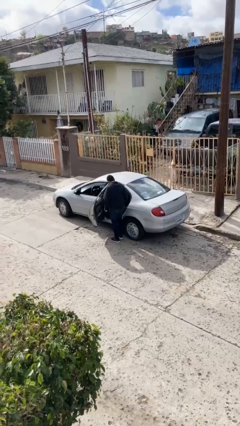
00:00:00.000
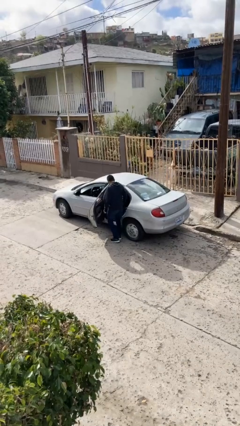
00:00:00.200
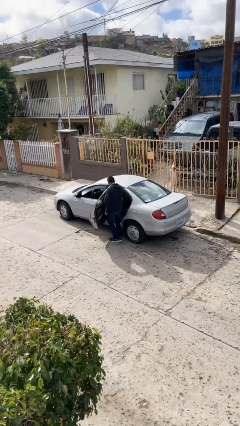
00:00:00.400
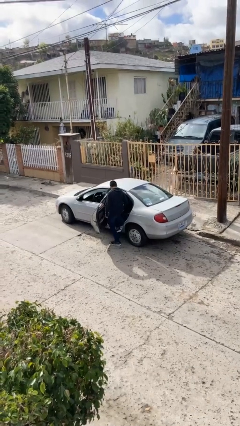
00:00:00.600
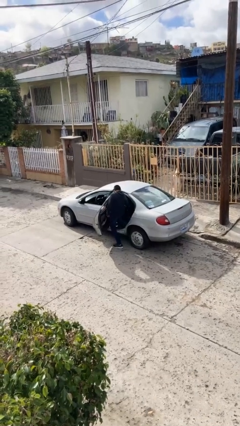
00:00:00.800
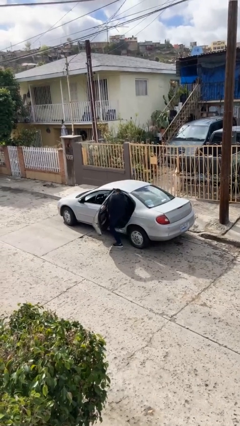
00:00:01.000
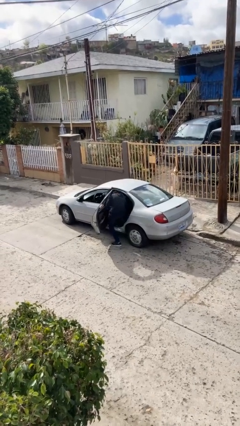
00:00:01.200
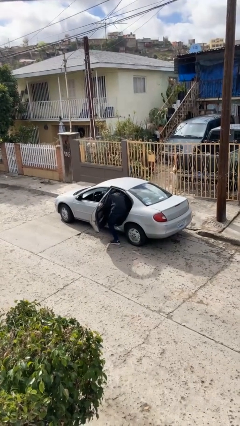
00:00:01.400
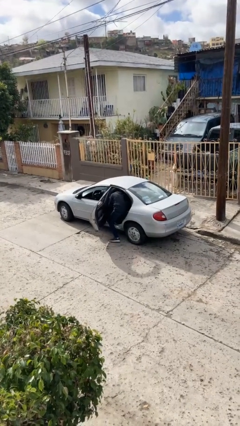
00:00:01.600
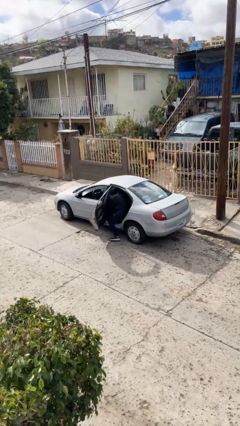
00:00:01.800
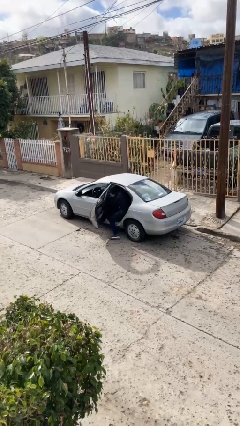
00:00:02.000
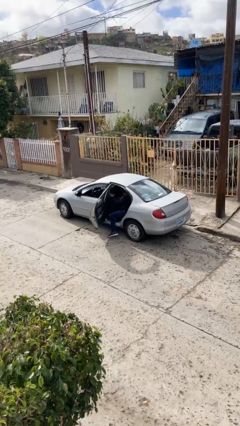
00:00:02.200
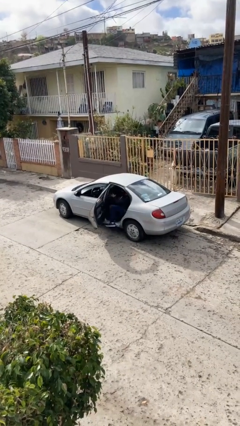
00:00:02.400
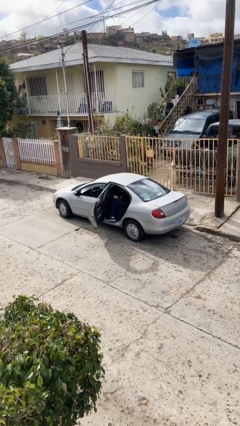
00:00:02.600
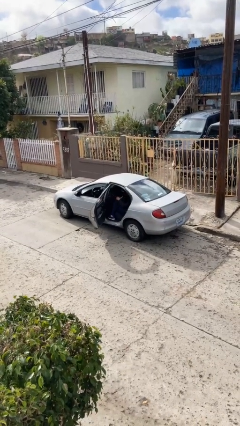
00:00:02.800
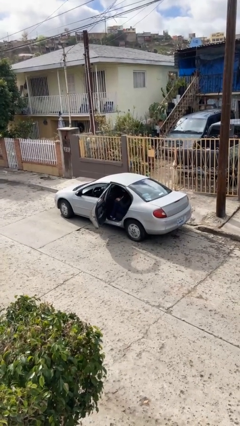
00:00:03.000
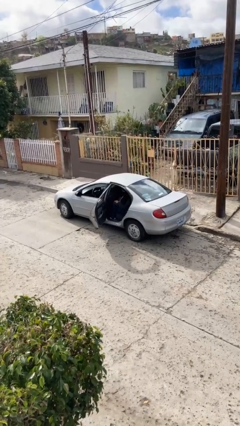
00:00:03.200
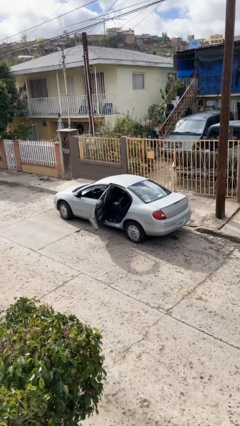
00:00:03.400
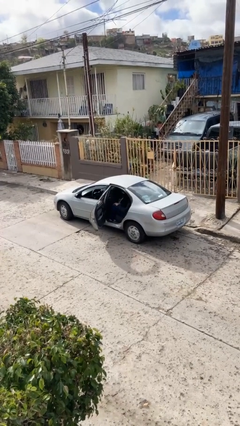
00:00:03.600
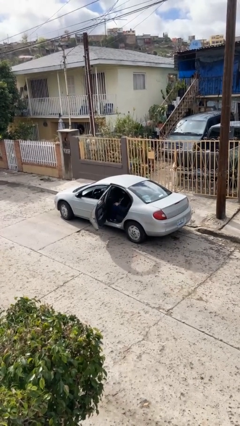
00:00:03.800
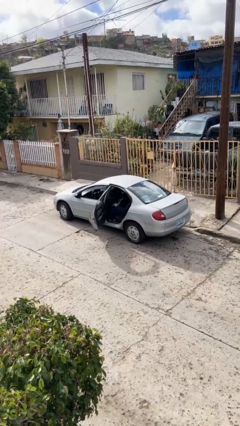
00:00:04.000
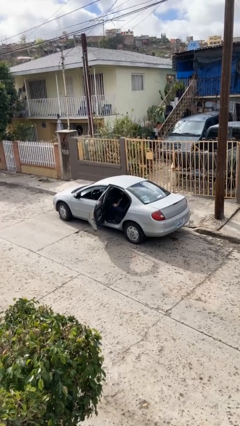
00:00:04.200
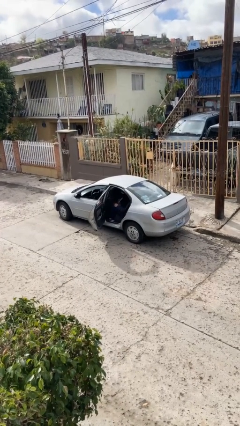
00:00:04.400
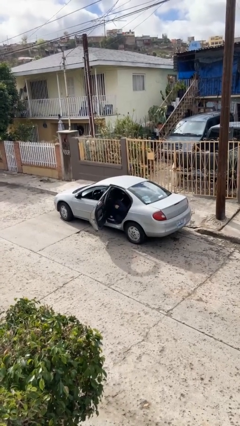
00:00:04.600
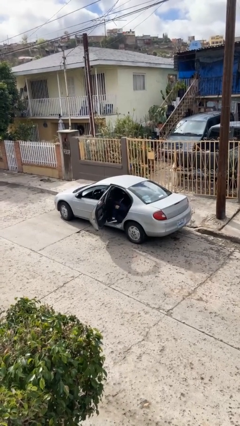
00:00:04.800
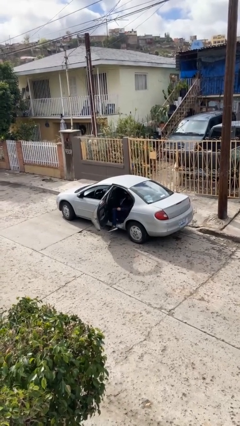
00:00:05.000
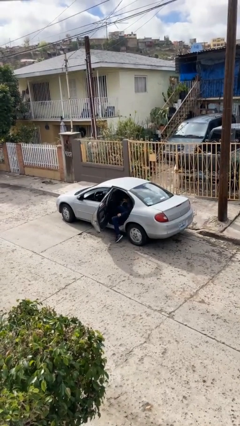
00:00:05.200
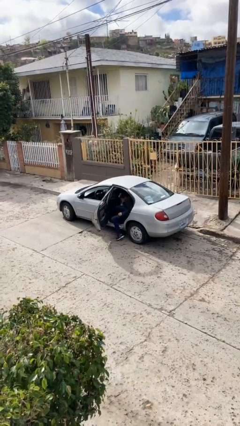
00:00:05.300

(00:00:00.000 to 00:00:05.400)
person enters car

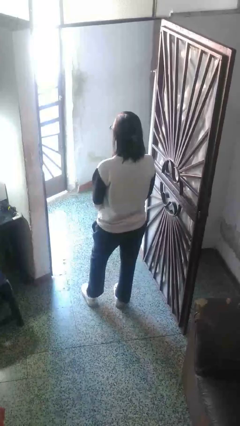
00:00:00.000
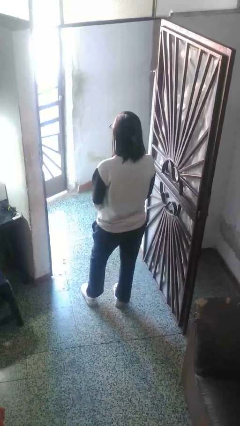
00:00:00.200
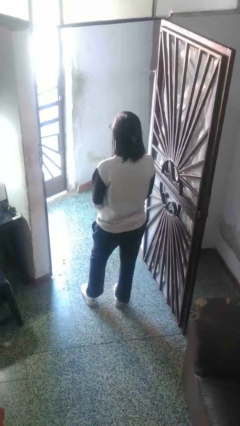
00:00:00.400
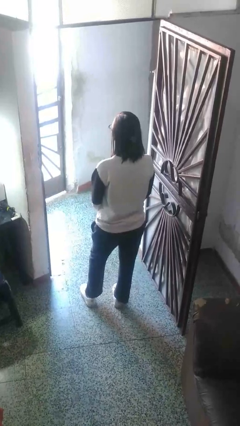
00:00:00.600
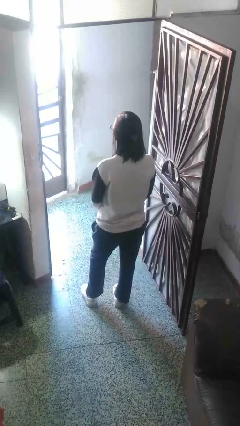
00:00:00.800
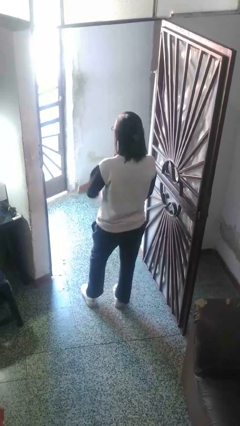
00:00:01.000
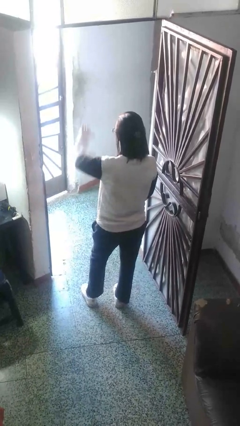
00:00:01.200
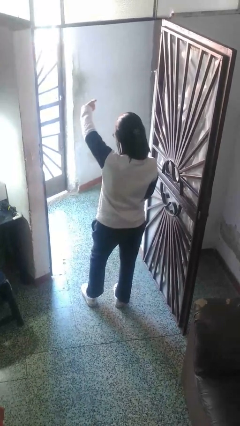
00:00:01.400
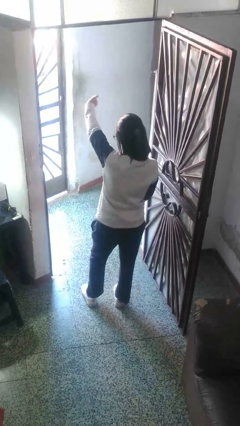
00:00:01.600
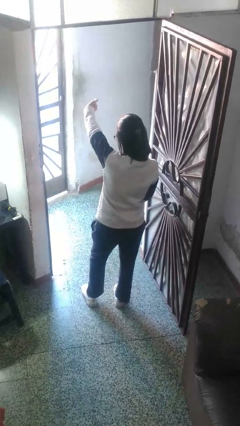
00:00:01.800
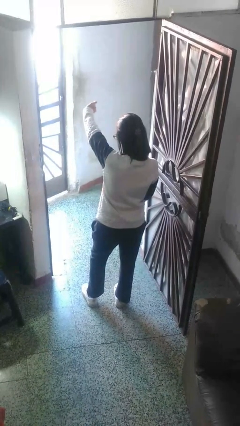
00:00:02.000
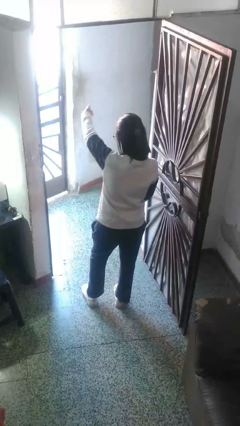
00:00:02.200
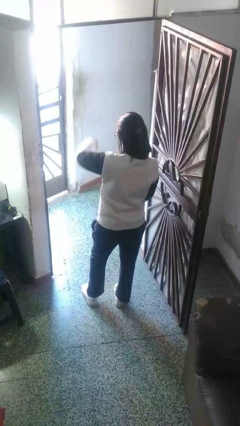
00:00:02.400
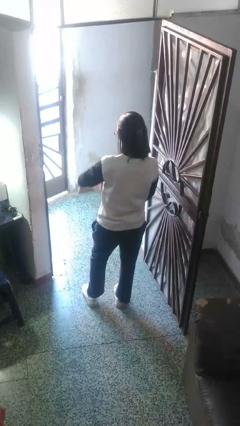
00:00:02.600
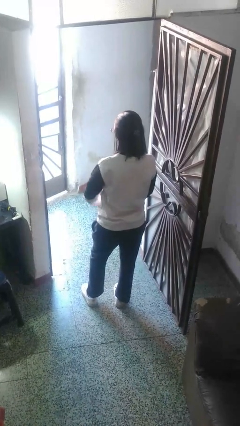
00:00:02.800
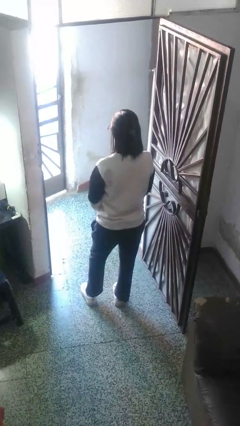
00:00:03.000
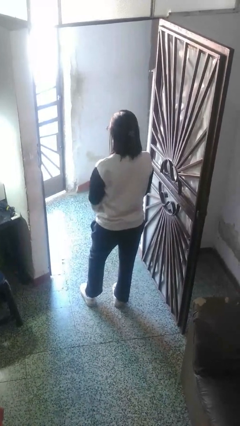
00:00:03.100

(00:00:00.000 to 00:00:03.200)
person gestures thumbs down

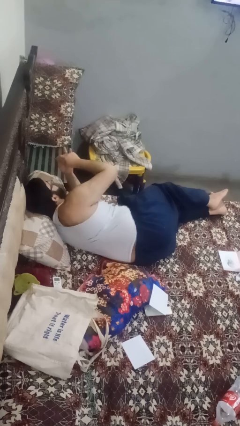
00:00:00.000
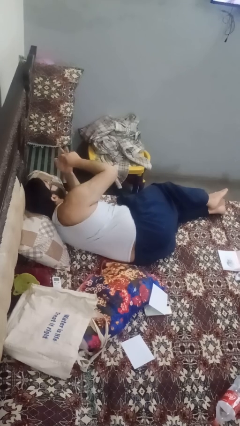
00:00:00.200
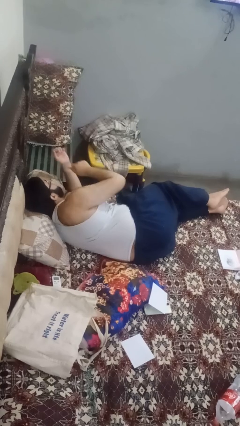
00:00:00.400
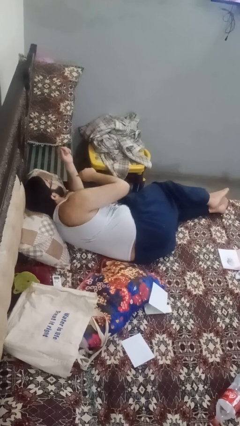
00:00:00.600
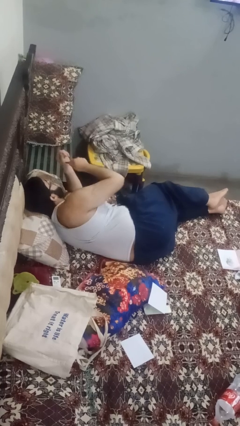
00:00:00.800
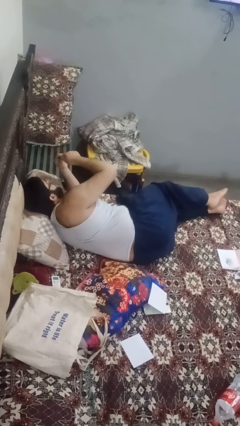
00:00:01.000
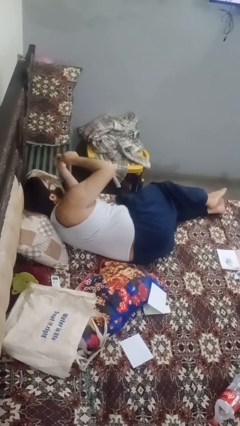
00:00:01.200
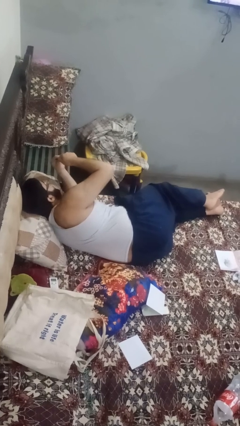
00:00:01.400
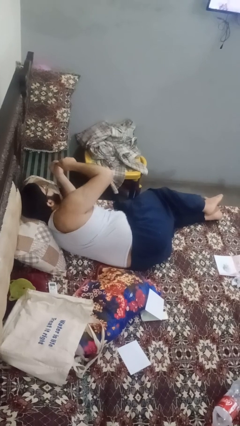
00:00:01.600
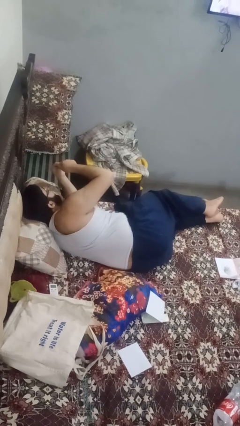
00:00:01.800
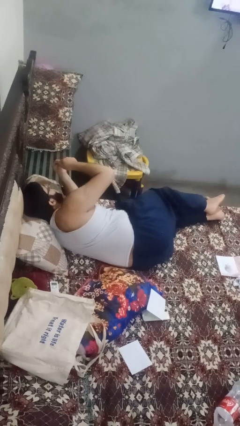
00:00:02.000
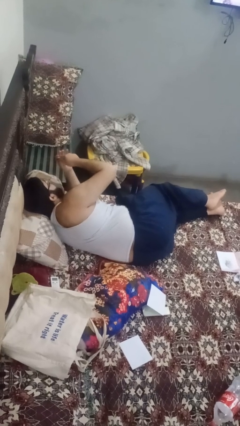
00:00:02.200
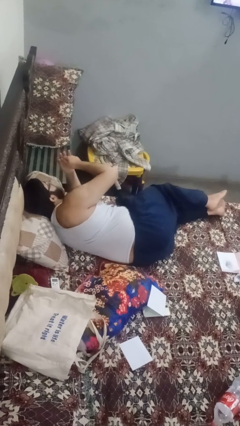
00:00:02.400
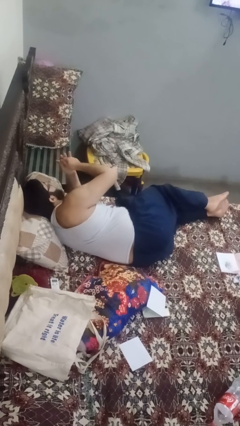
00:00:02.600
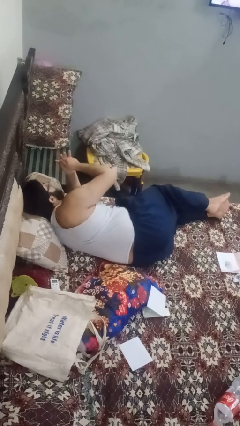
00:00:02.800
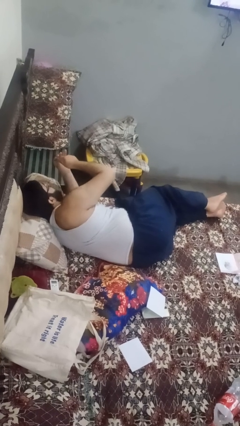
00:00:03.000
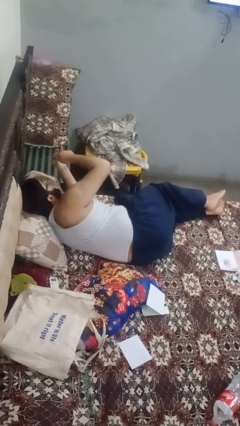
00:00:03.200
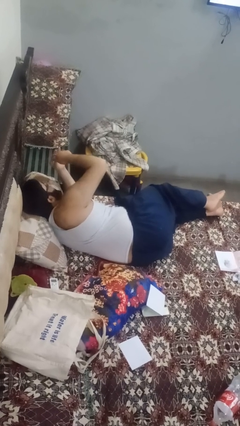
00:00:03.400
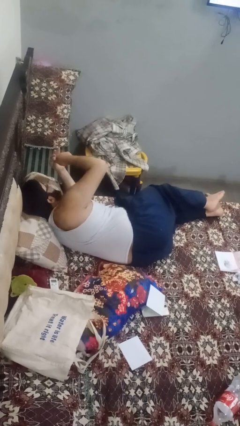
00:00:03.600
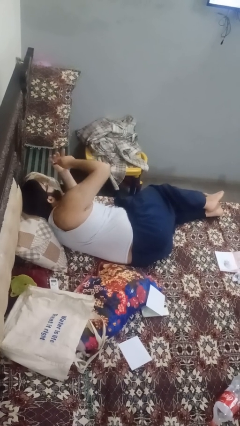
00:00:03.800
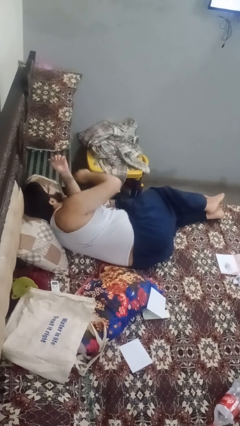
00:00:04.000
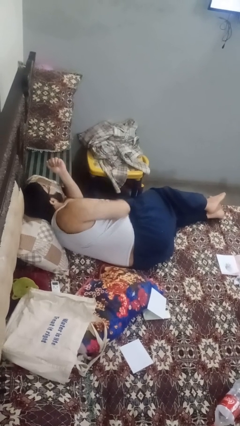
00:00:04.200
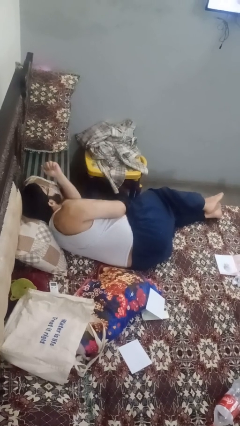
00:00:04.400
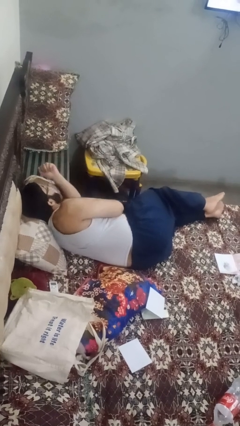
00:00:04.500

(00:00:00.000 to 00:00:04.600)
person files fingernails

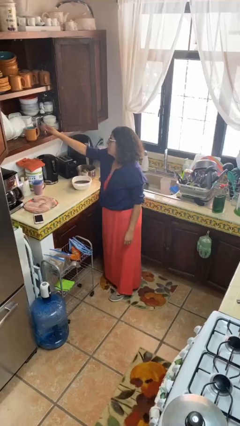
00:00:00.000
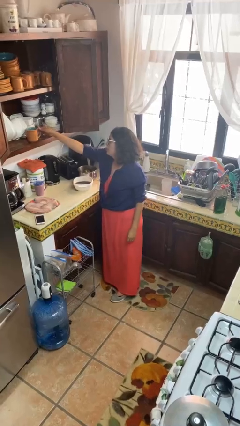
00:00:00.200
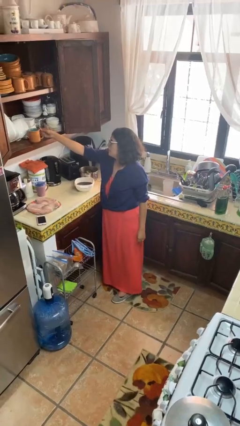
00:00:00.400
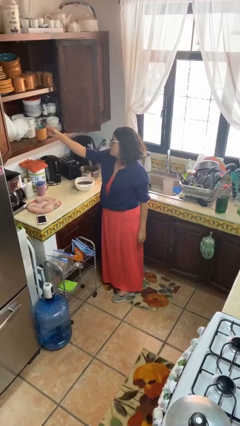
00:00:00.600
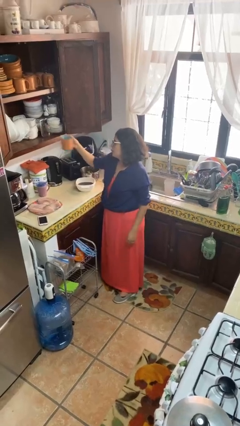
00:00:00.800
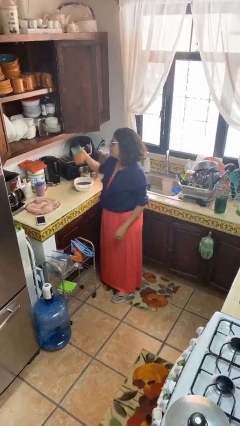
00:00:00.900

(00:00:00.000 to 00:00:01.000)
person picks up object from cabinet

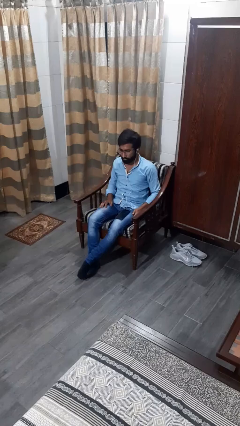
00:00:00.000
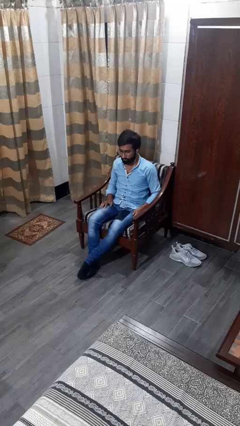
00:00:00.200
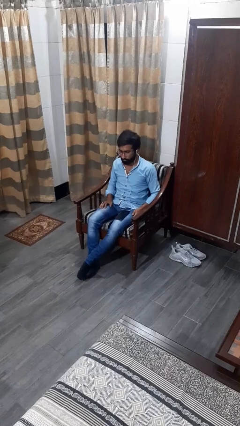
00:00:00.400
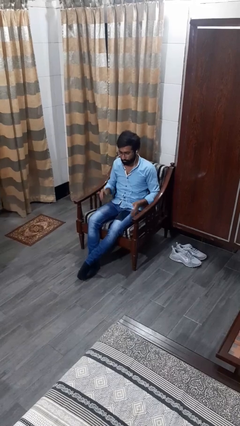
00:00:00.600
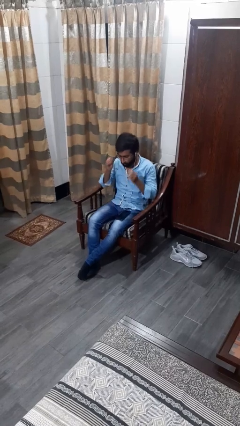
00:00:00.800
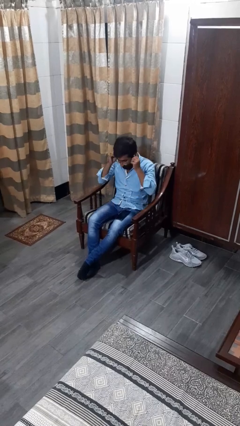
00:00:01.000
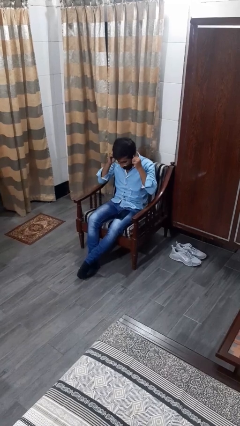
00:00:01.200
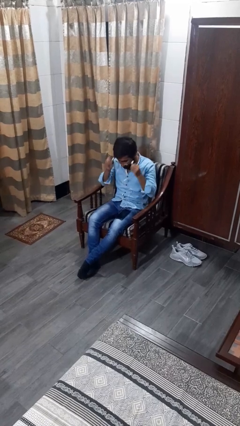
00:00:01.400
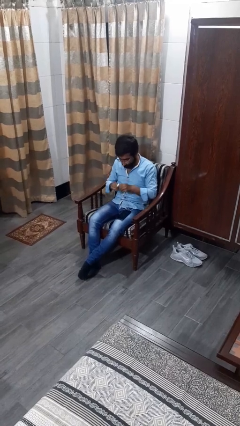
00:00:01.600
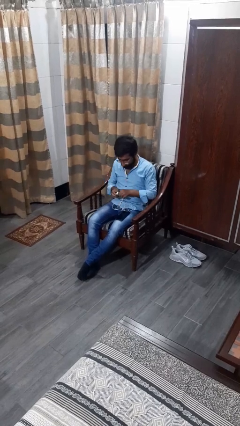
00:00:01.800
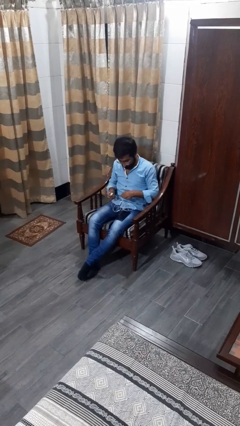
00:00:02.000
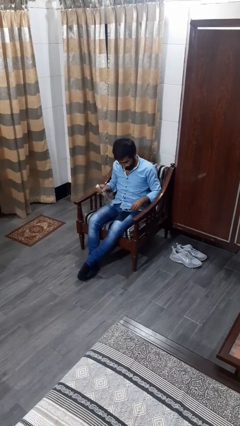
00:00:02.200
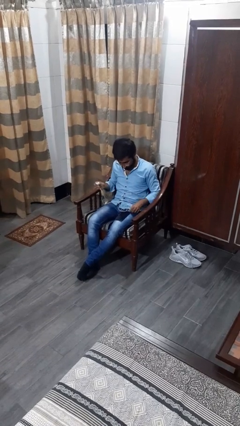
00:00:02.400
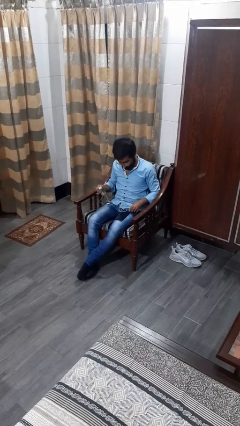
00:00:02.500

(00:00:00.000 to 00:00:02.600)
person takes off headphones

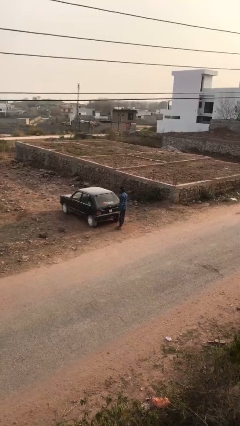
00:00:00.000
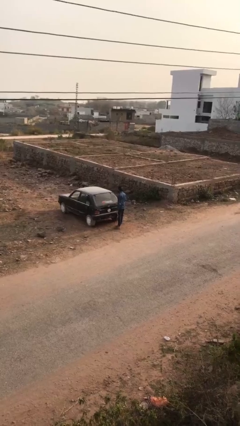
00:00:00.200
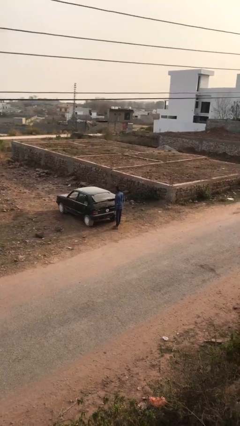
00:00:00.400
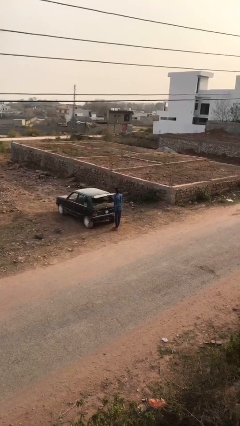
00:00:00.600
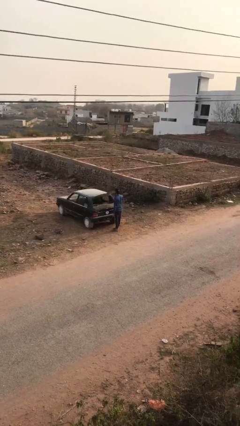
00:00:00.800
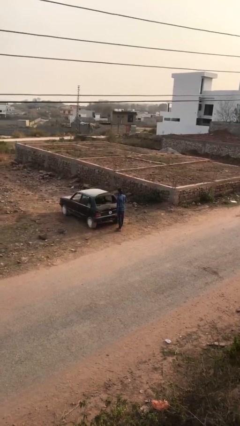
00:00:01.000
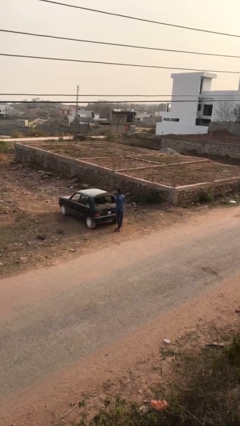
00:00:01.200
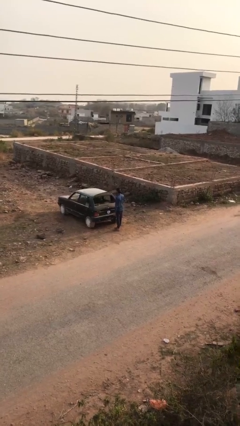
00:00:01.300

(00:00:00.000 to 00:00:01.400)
person opens car trunk
